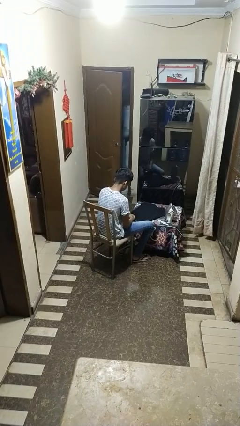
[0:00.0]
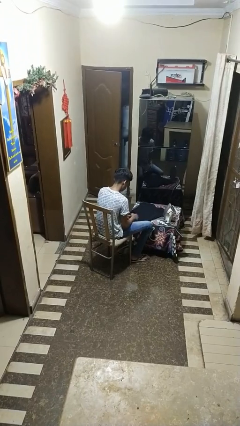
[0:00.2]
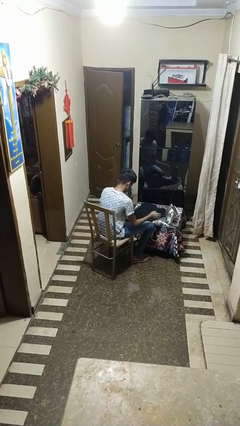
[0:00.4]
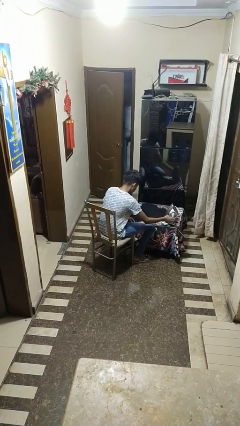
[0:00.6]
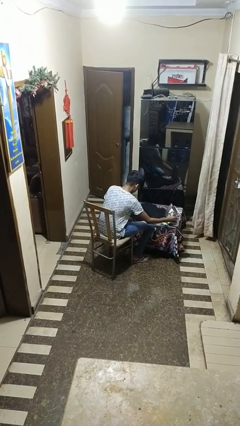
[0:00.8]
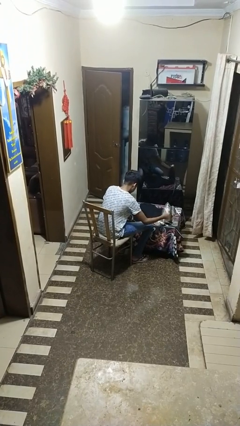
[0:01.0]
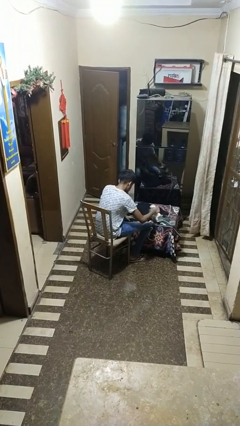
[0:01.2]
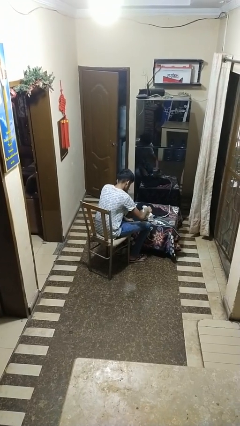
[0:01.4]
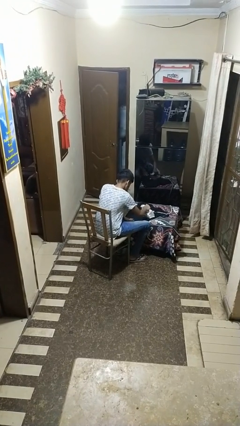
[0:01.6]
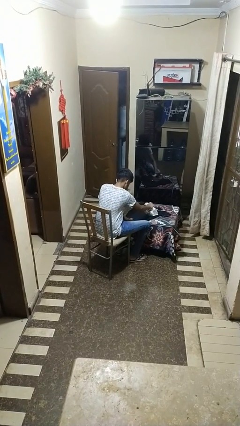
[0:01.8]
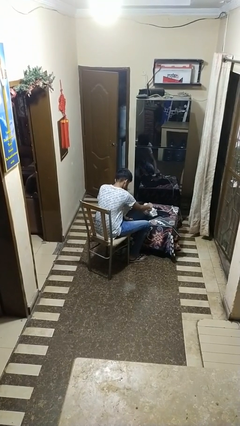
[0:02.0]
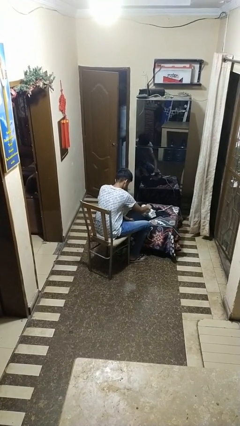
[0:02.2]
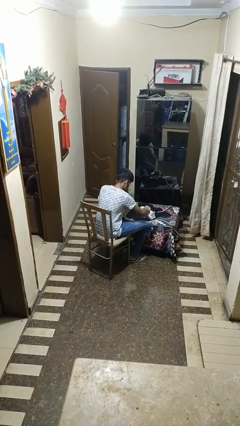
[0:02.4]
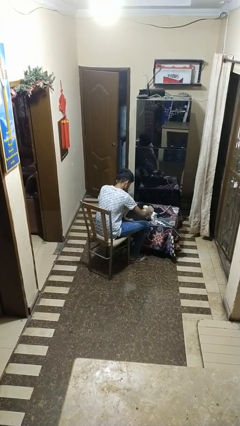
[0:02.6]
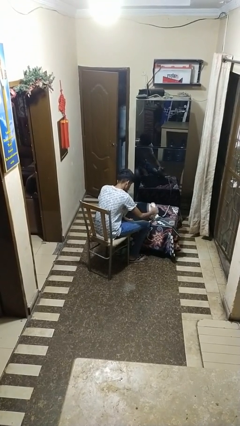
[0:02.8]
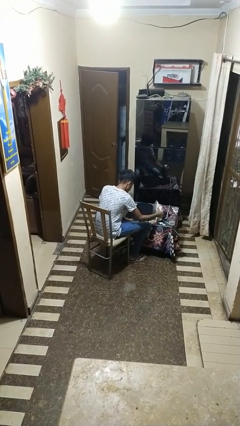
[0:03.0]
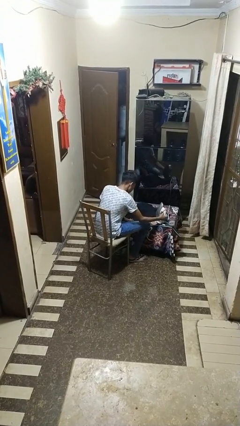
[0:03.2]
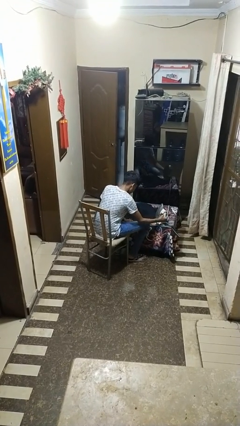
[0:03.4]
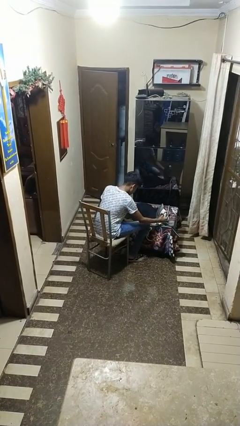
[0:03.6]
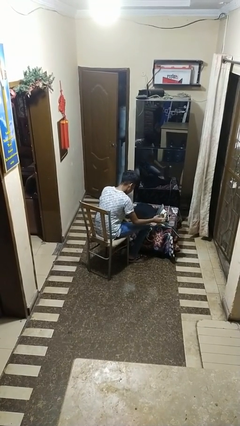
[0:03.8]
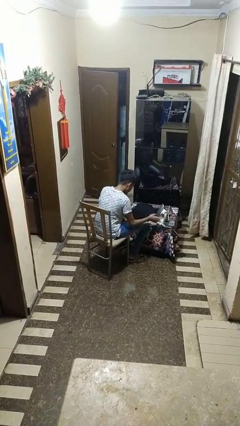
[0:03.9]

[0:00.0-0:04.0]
person irons clothes

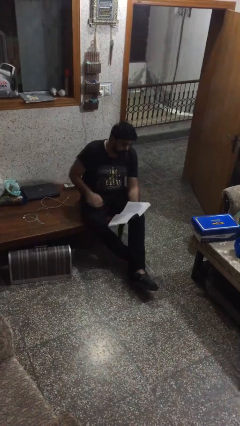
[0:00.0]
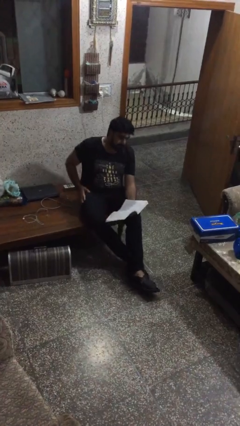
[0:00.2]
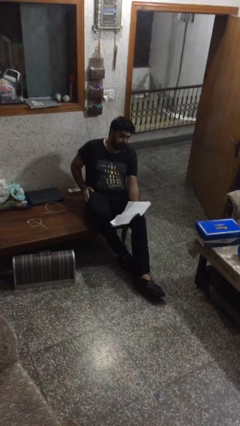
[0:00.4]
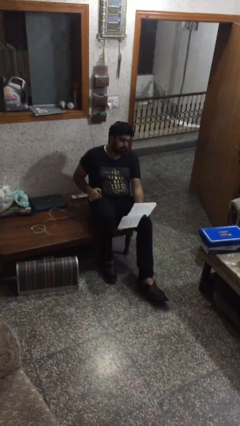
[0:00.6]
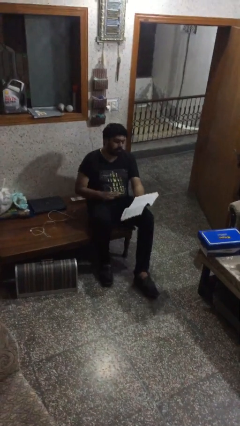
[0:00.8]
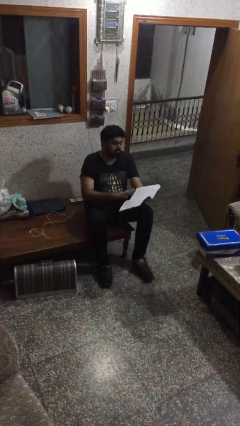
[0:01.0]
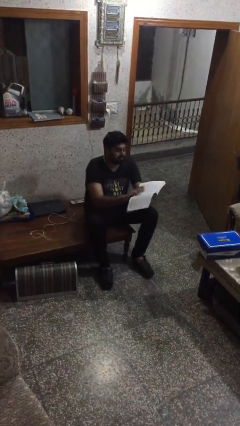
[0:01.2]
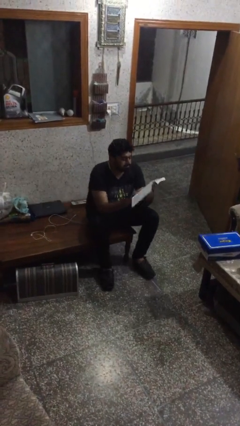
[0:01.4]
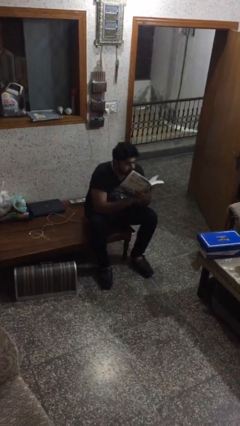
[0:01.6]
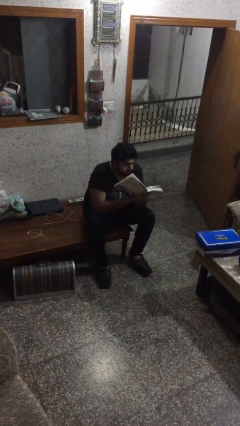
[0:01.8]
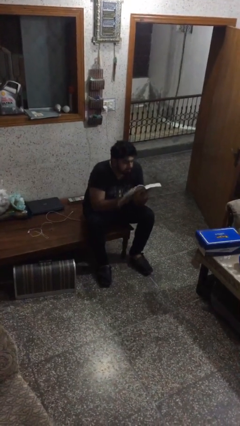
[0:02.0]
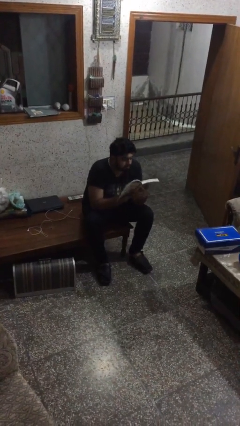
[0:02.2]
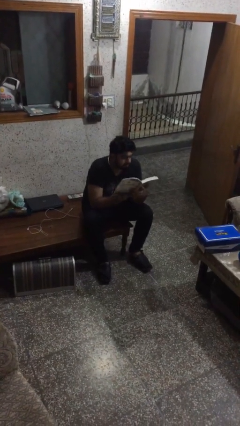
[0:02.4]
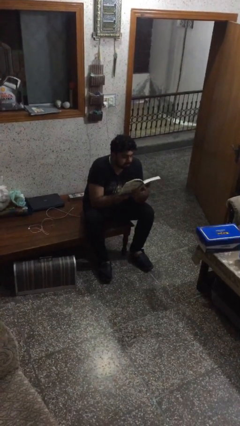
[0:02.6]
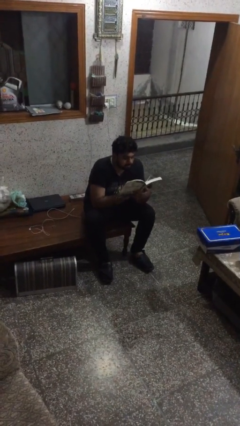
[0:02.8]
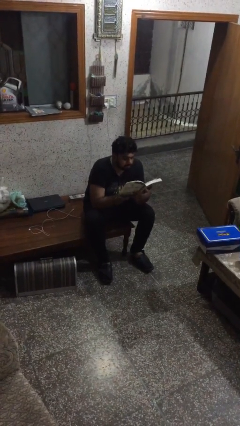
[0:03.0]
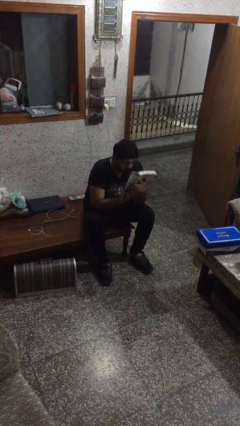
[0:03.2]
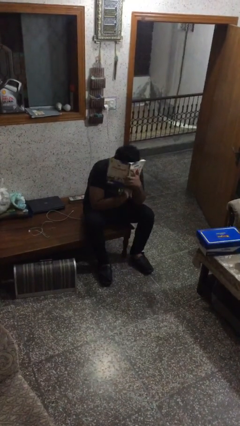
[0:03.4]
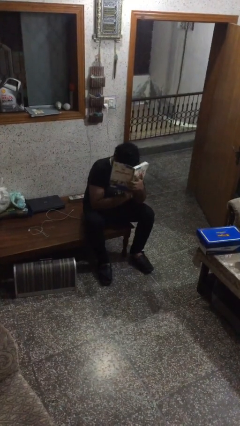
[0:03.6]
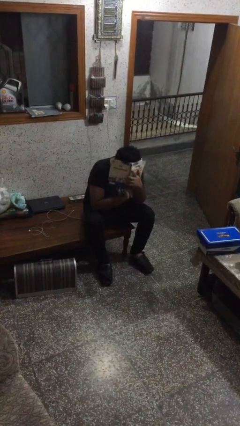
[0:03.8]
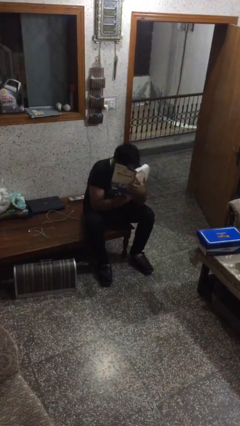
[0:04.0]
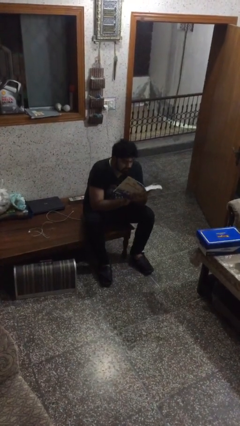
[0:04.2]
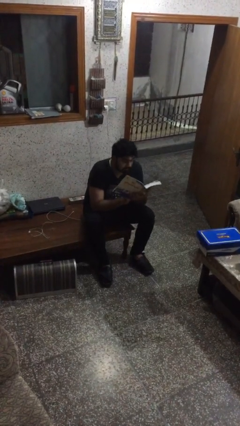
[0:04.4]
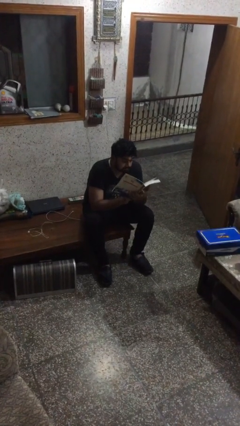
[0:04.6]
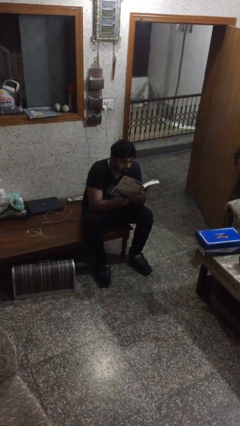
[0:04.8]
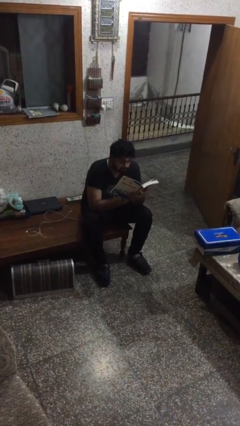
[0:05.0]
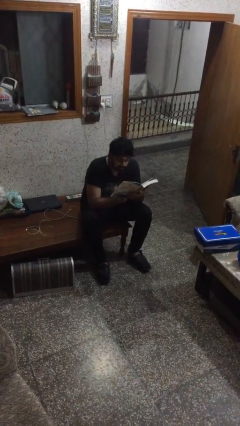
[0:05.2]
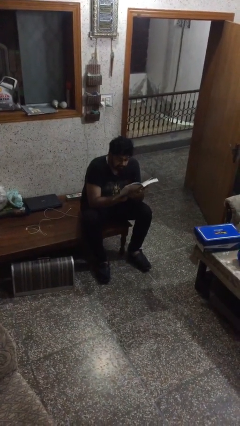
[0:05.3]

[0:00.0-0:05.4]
person reads document

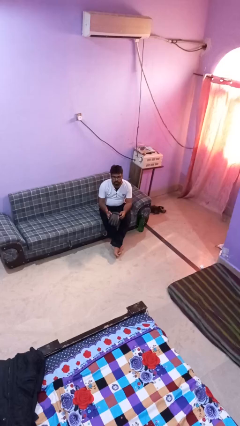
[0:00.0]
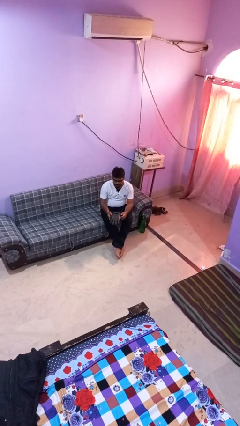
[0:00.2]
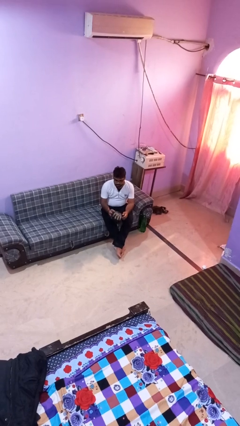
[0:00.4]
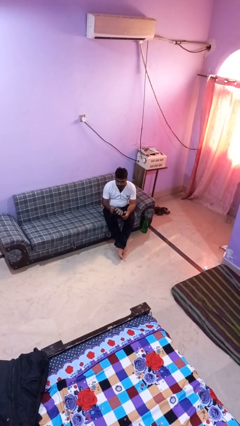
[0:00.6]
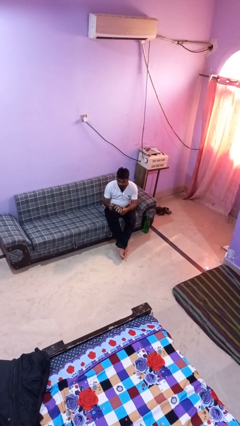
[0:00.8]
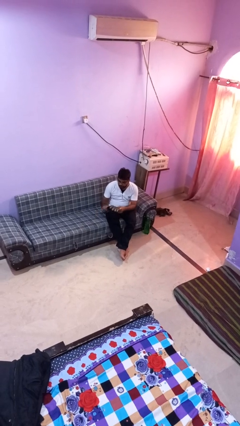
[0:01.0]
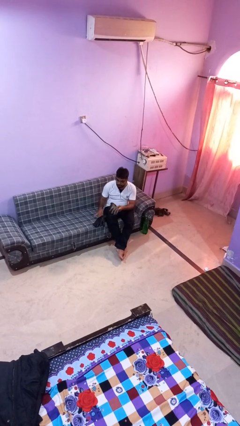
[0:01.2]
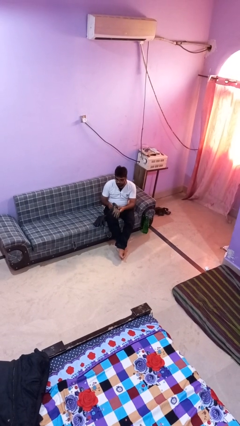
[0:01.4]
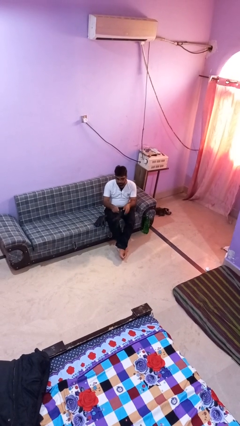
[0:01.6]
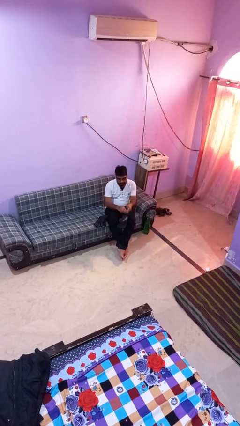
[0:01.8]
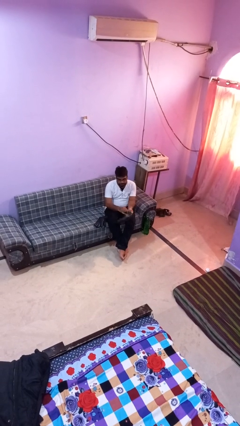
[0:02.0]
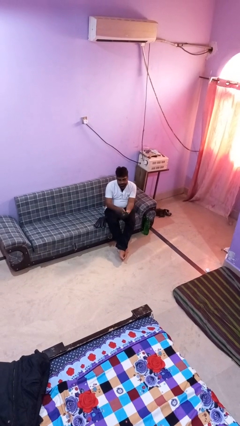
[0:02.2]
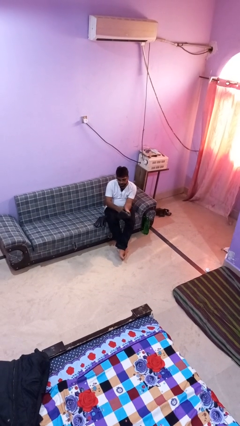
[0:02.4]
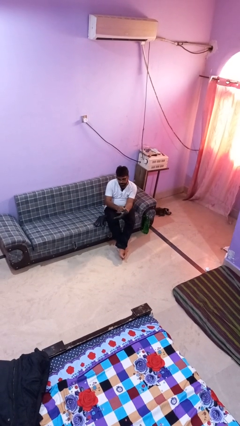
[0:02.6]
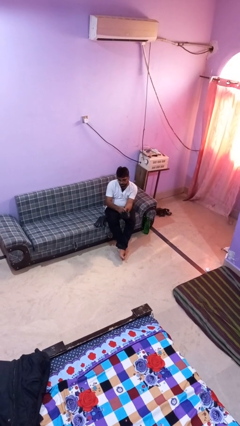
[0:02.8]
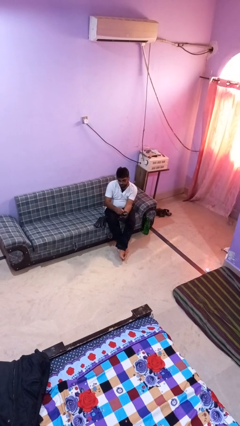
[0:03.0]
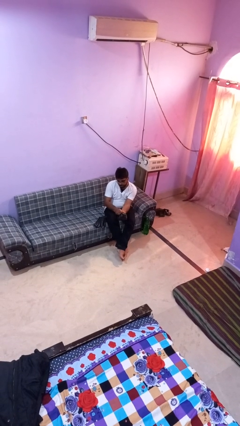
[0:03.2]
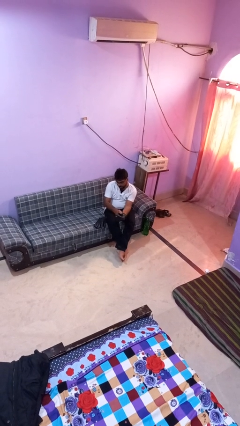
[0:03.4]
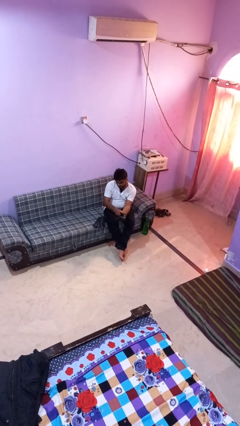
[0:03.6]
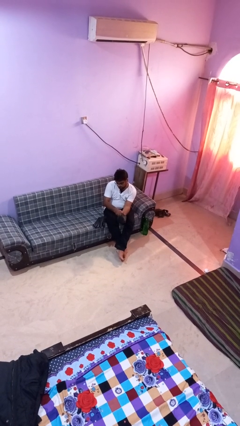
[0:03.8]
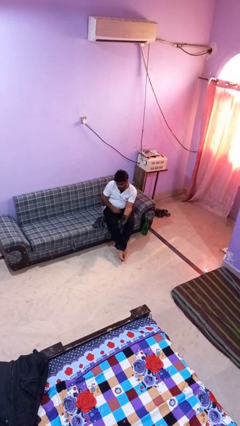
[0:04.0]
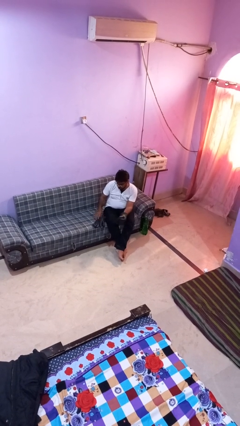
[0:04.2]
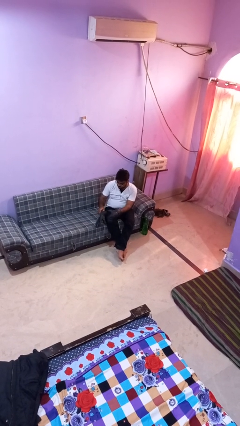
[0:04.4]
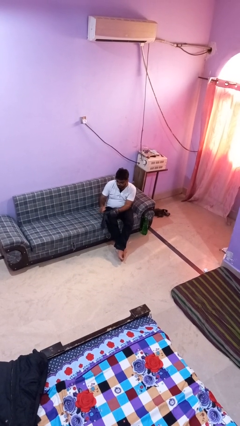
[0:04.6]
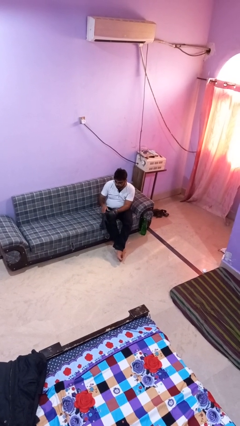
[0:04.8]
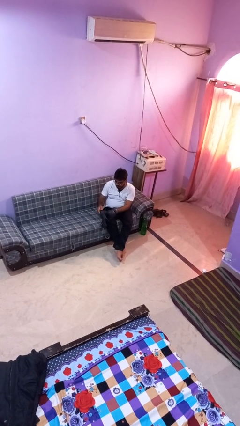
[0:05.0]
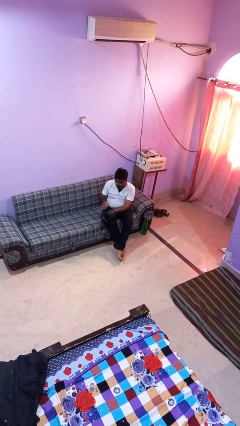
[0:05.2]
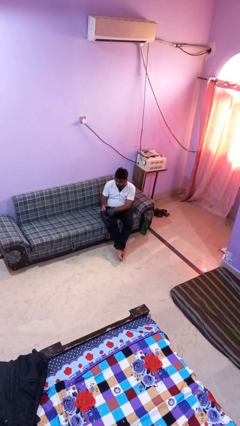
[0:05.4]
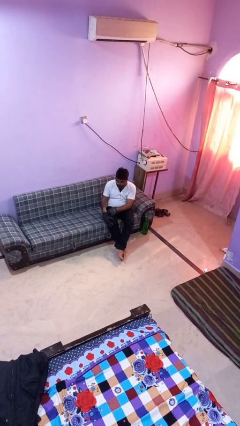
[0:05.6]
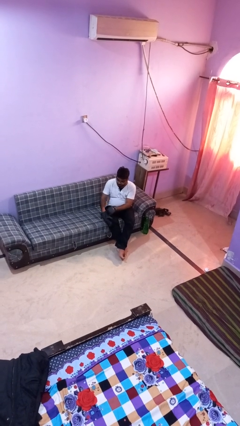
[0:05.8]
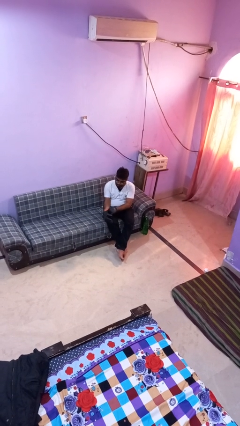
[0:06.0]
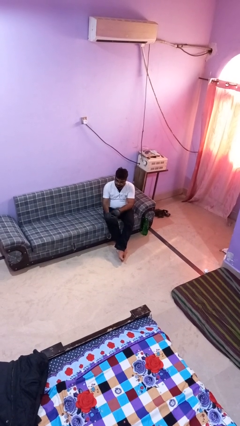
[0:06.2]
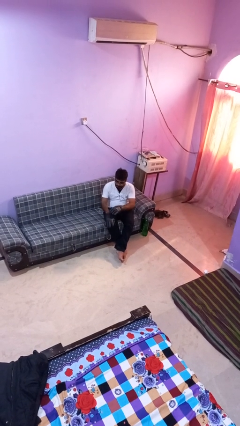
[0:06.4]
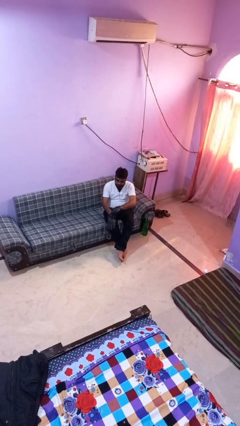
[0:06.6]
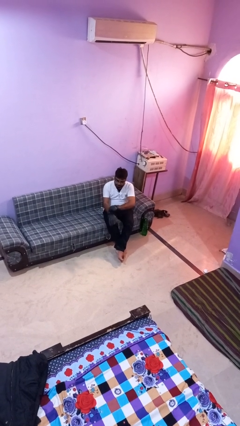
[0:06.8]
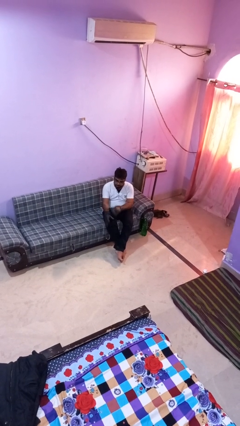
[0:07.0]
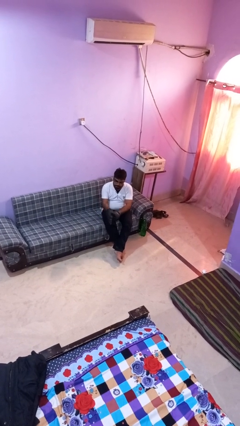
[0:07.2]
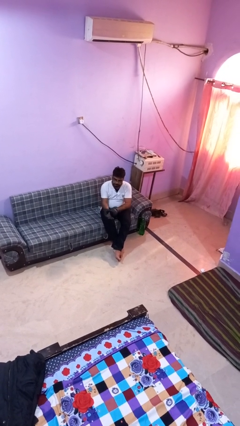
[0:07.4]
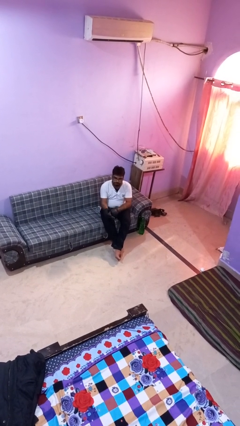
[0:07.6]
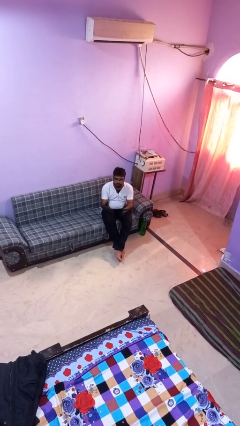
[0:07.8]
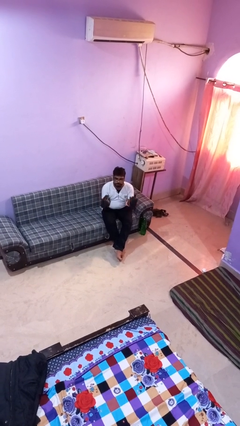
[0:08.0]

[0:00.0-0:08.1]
person puts on gloves

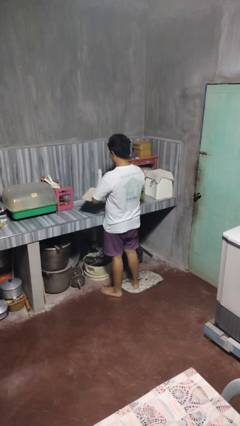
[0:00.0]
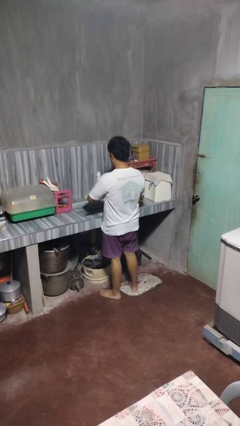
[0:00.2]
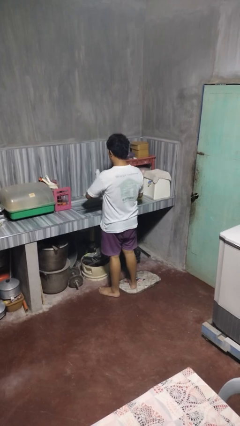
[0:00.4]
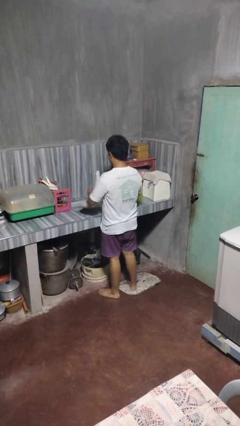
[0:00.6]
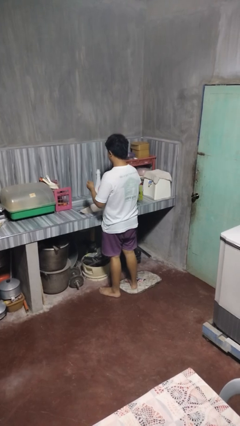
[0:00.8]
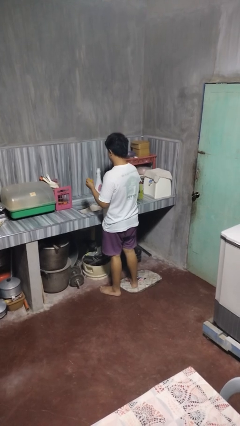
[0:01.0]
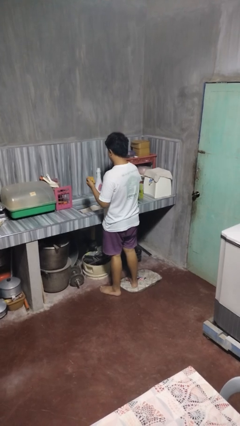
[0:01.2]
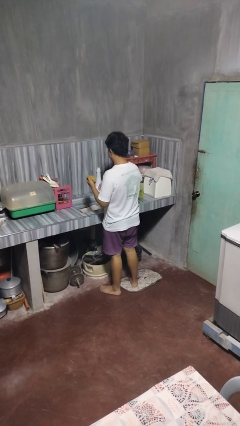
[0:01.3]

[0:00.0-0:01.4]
person washes dish
